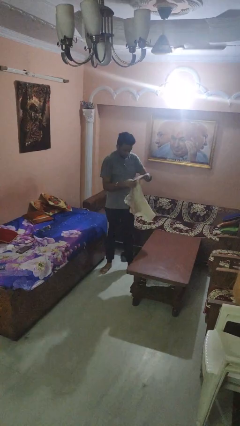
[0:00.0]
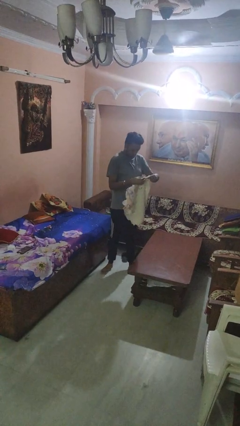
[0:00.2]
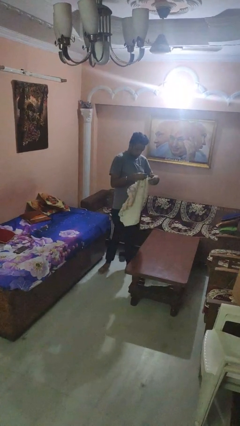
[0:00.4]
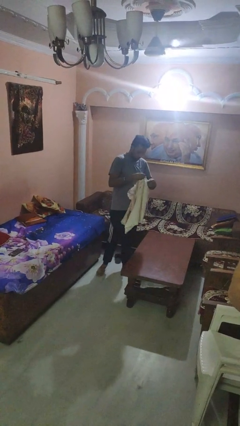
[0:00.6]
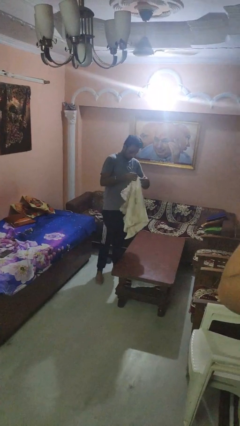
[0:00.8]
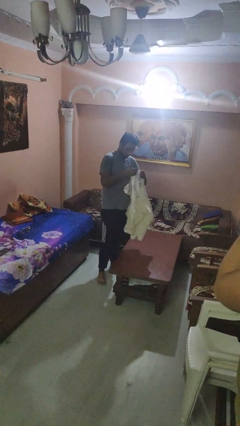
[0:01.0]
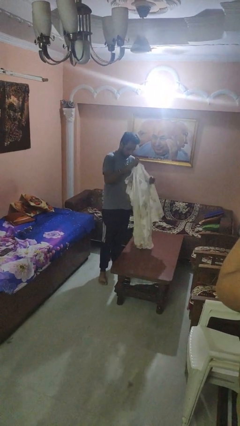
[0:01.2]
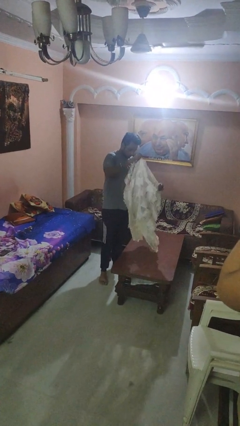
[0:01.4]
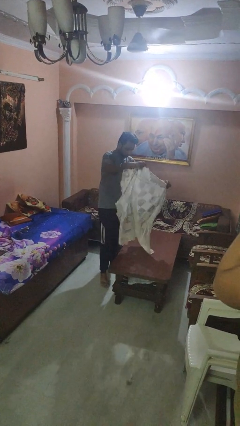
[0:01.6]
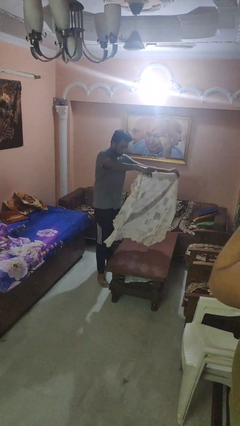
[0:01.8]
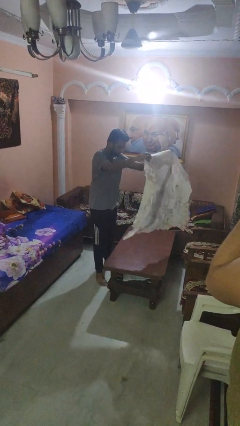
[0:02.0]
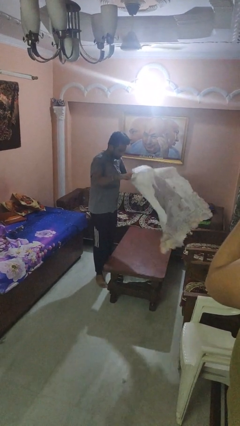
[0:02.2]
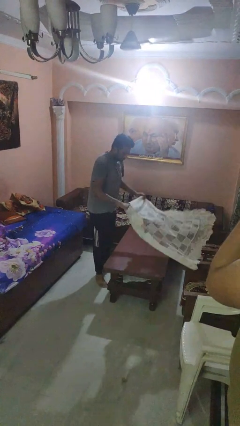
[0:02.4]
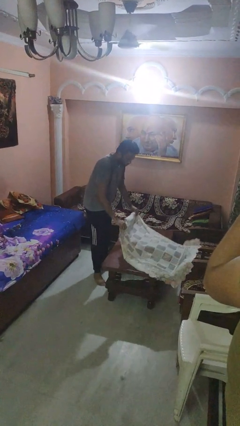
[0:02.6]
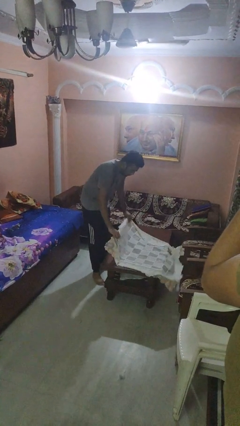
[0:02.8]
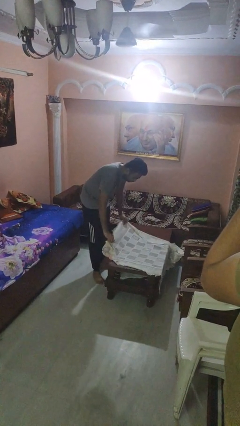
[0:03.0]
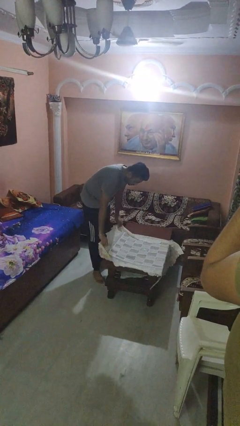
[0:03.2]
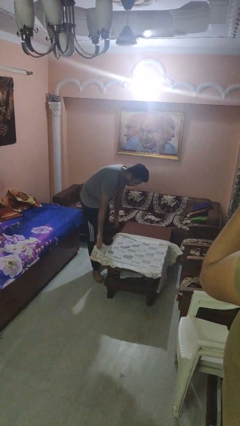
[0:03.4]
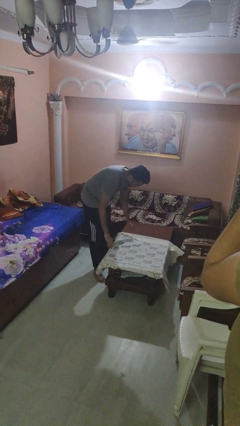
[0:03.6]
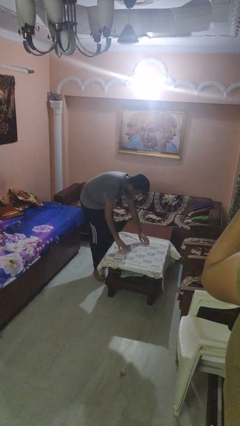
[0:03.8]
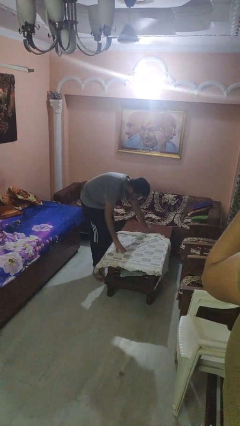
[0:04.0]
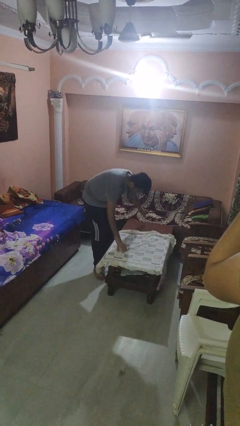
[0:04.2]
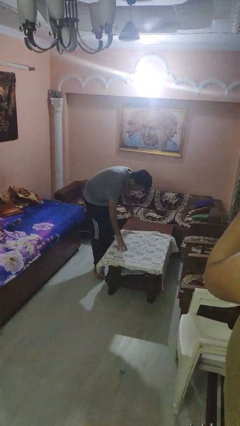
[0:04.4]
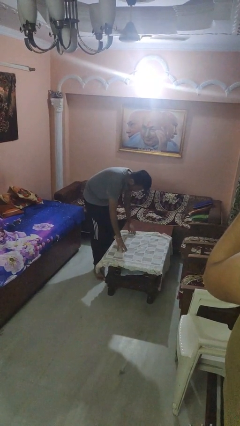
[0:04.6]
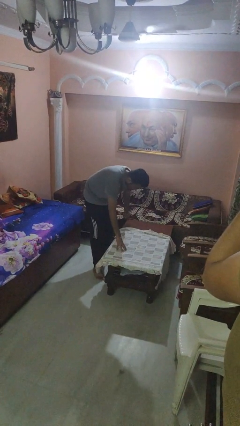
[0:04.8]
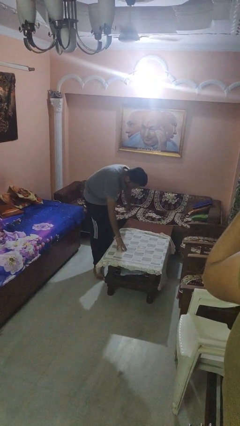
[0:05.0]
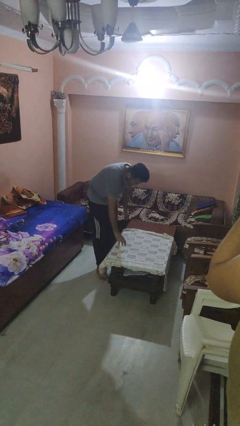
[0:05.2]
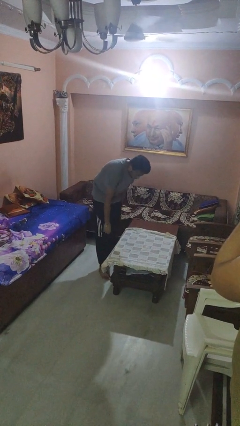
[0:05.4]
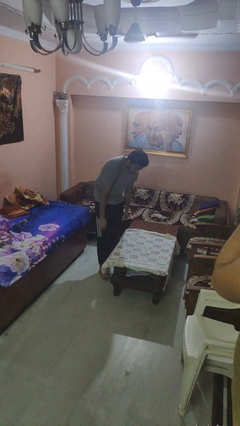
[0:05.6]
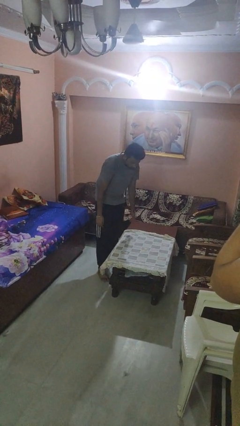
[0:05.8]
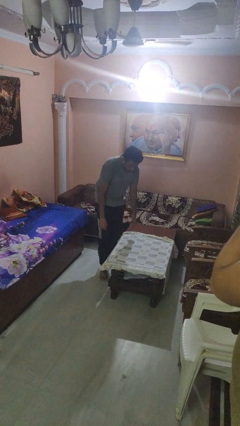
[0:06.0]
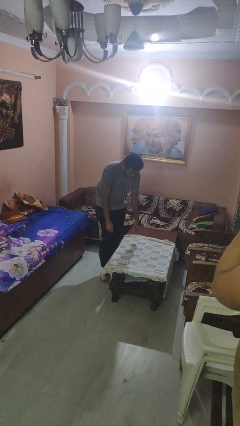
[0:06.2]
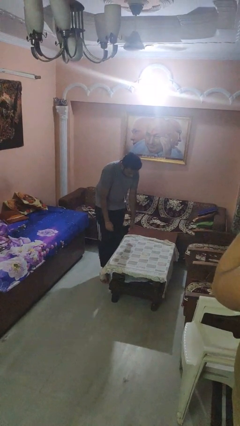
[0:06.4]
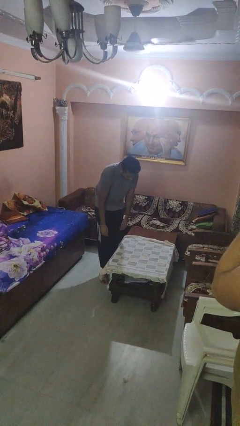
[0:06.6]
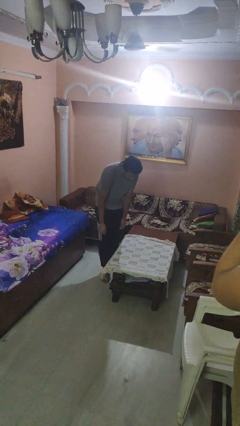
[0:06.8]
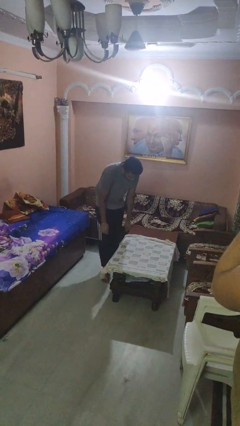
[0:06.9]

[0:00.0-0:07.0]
person spreads tablecloth

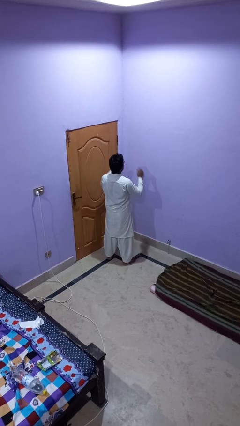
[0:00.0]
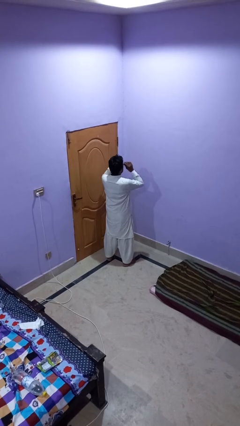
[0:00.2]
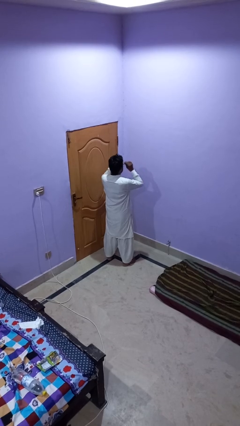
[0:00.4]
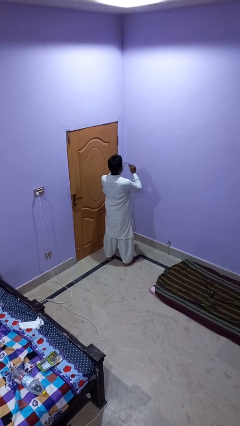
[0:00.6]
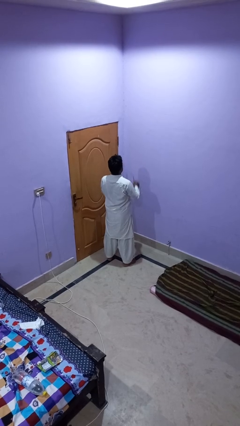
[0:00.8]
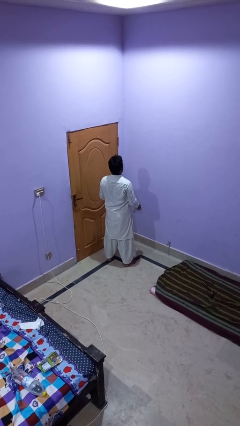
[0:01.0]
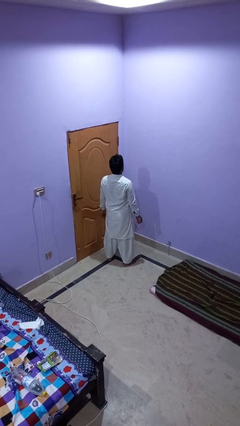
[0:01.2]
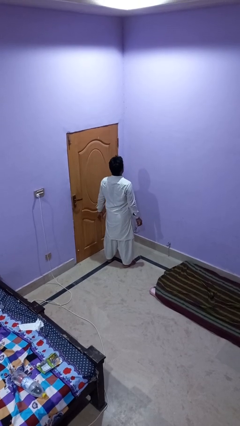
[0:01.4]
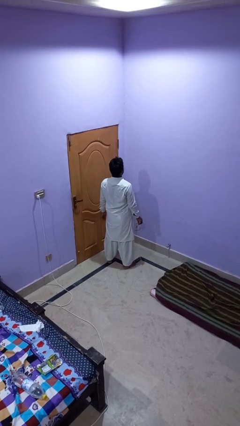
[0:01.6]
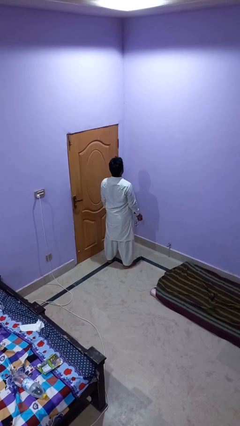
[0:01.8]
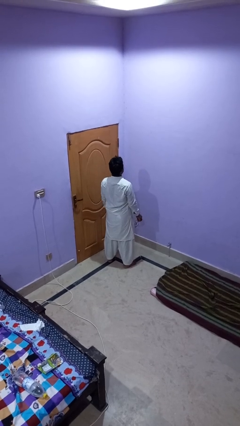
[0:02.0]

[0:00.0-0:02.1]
person takes off glasses

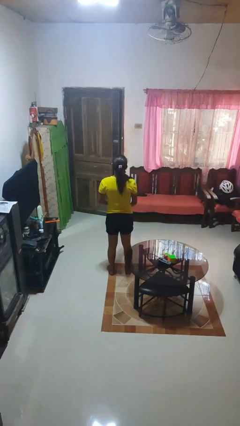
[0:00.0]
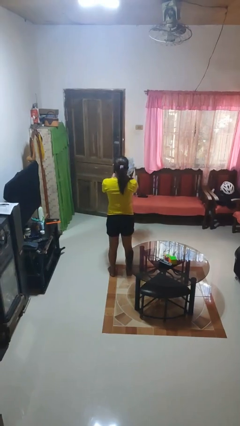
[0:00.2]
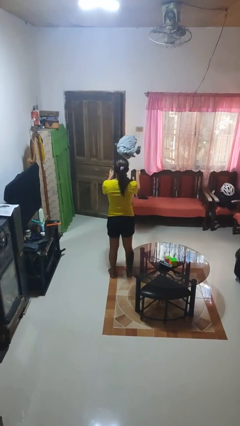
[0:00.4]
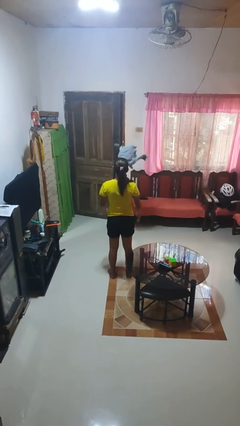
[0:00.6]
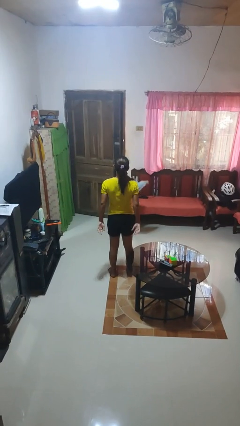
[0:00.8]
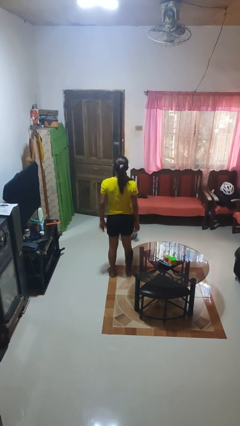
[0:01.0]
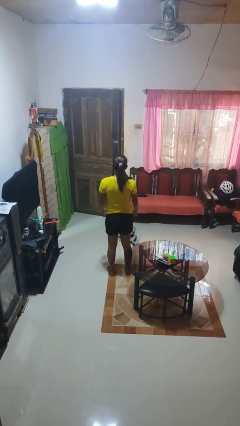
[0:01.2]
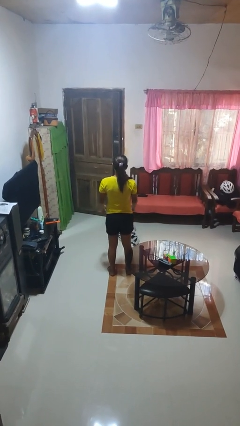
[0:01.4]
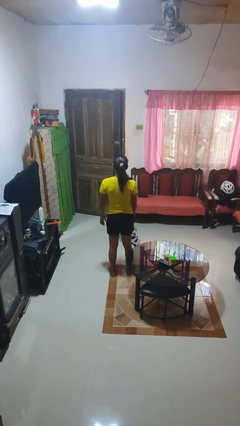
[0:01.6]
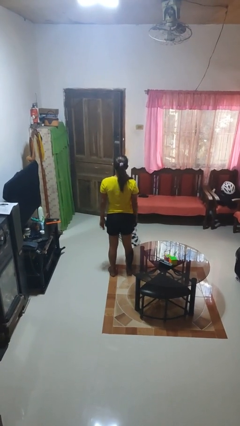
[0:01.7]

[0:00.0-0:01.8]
person throws object into air

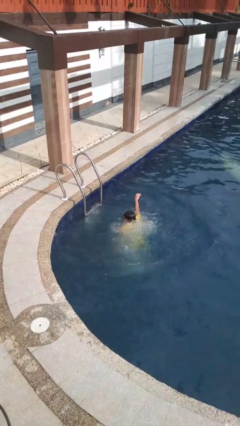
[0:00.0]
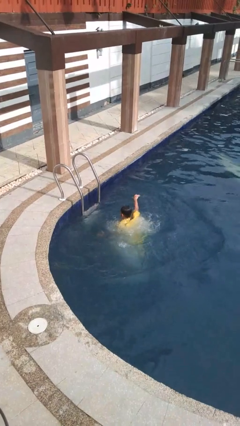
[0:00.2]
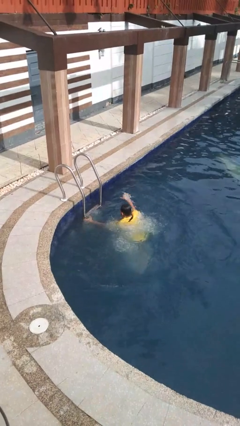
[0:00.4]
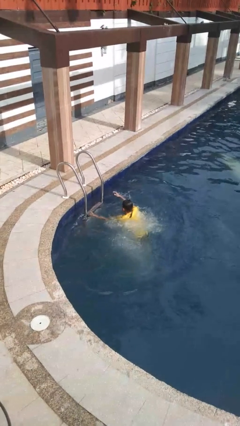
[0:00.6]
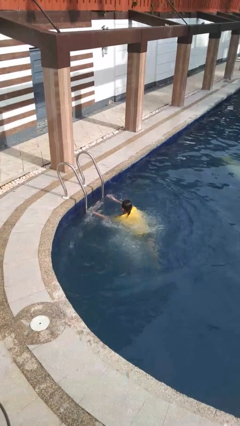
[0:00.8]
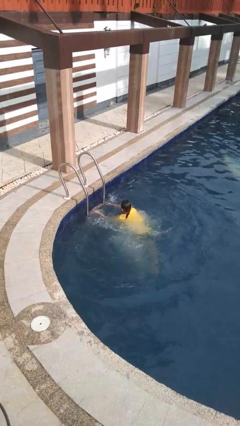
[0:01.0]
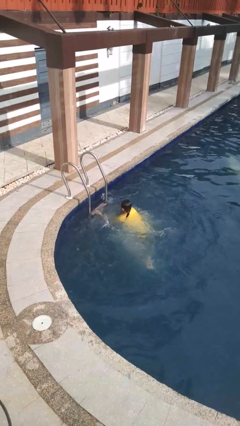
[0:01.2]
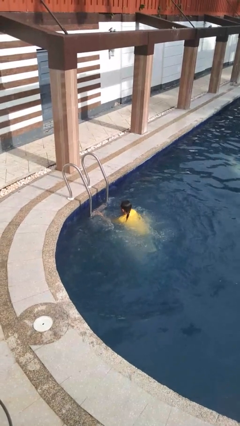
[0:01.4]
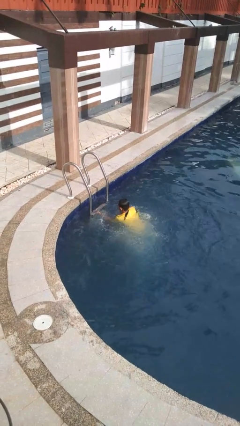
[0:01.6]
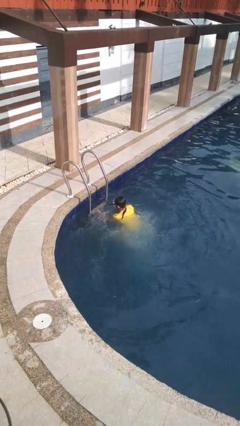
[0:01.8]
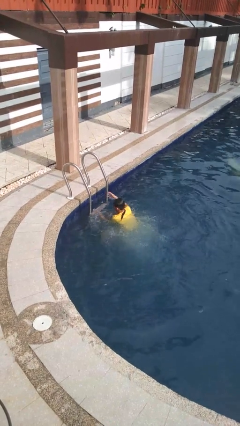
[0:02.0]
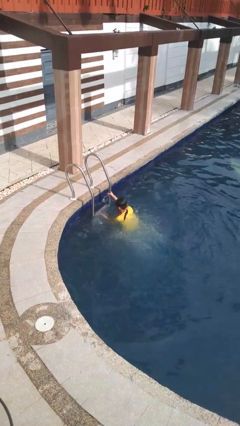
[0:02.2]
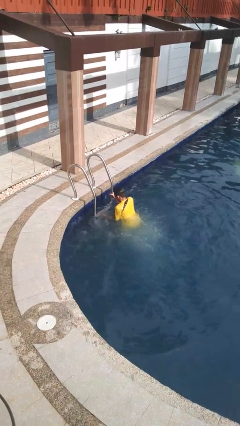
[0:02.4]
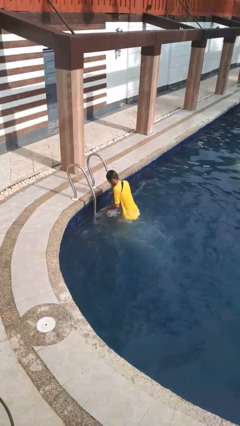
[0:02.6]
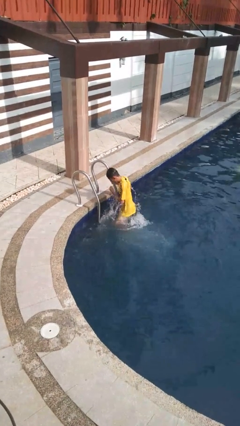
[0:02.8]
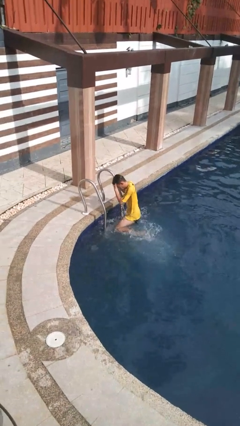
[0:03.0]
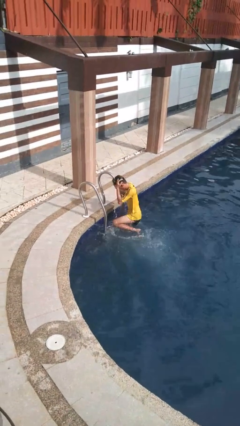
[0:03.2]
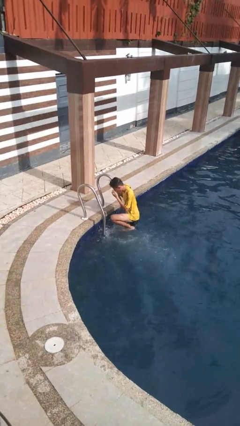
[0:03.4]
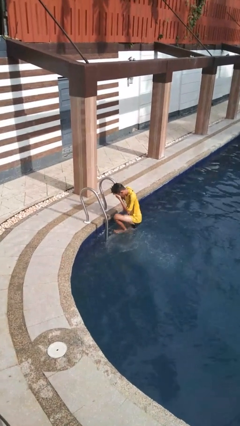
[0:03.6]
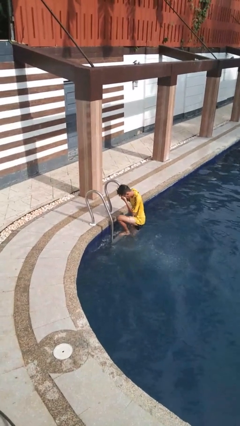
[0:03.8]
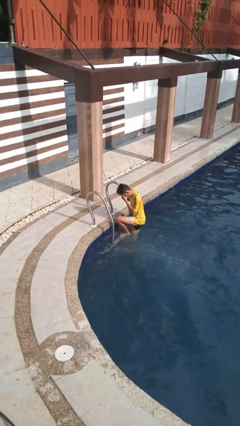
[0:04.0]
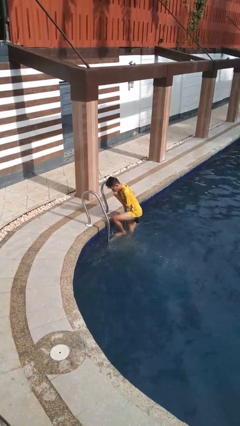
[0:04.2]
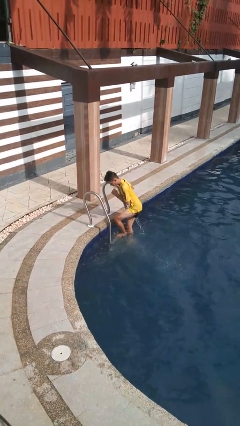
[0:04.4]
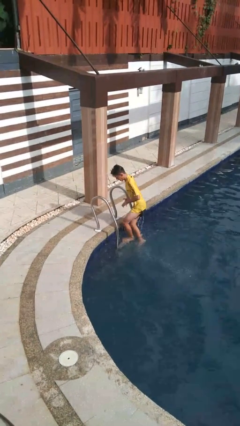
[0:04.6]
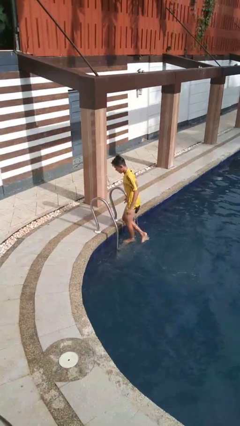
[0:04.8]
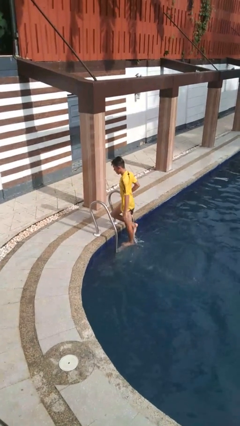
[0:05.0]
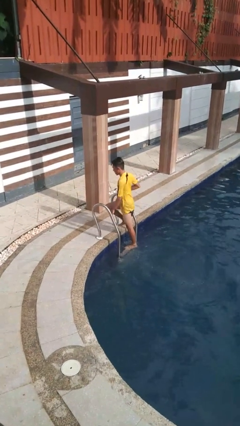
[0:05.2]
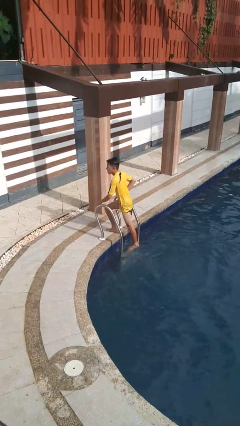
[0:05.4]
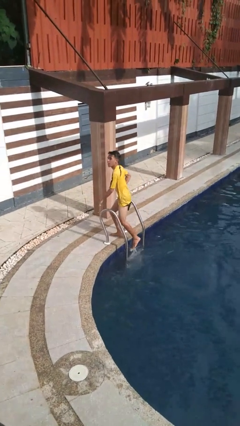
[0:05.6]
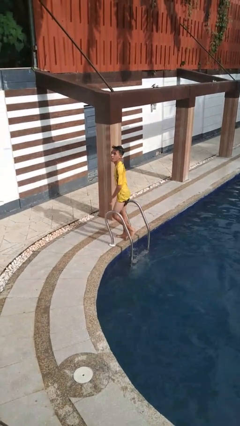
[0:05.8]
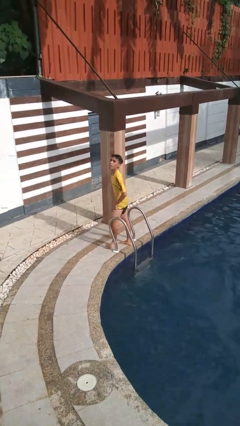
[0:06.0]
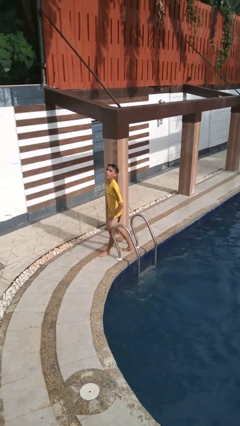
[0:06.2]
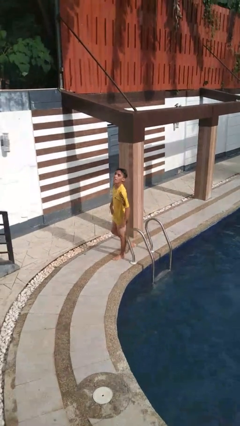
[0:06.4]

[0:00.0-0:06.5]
person exits pool

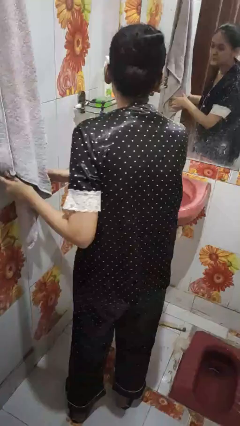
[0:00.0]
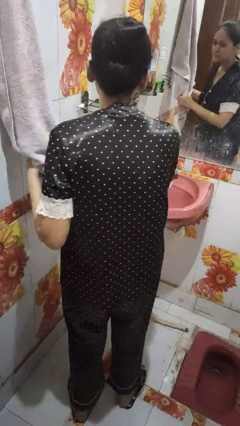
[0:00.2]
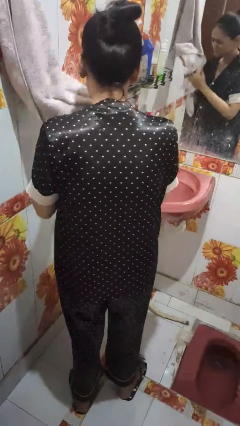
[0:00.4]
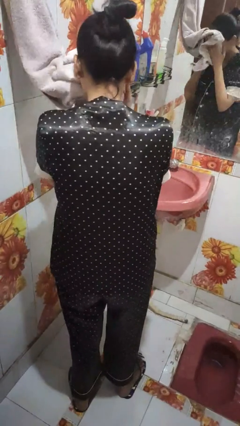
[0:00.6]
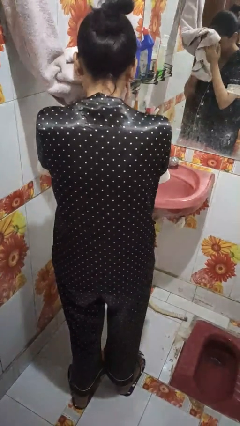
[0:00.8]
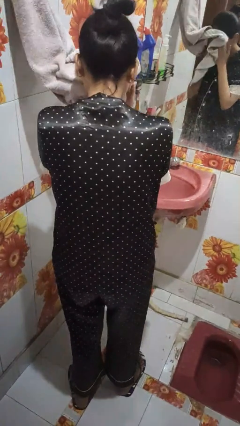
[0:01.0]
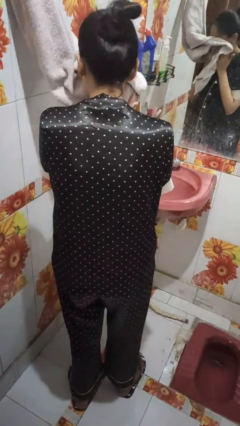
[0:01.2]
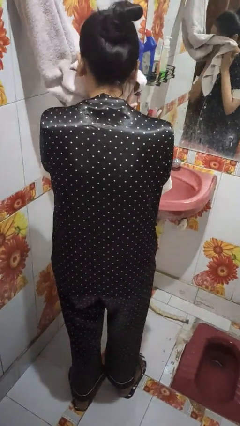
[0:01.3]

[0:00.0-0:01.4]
person dries face with towel
